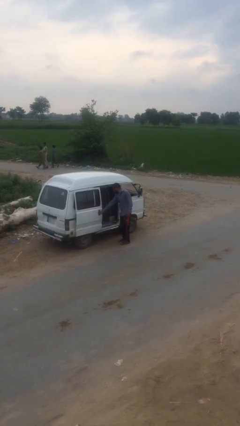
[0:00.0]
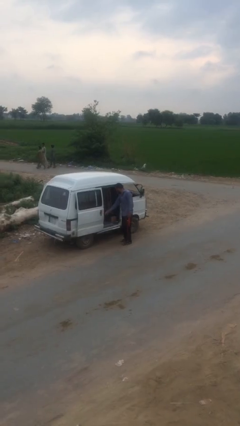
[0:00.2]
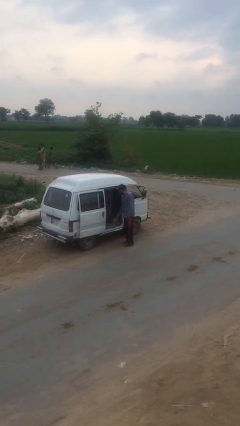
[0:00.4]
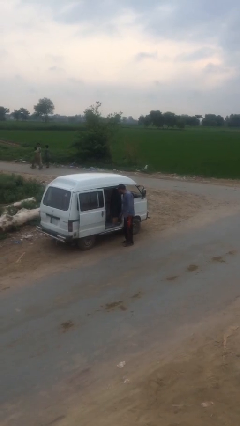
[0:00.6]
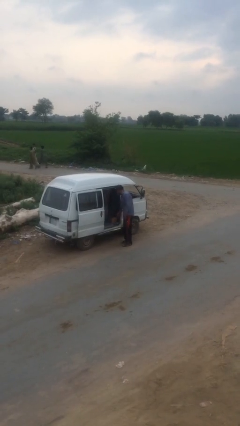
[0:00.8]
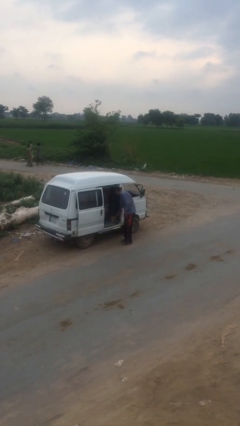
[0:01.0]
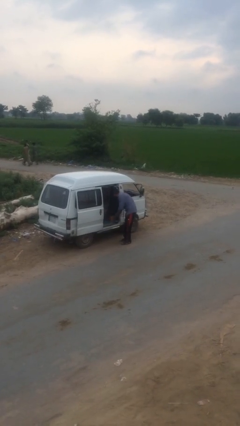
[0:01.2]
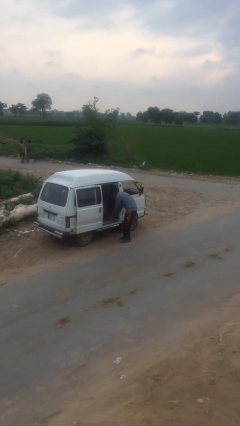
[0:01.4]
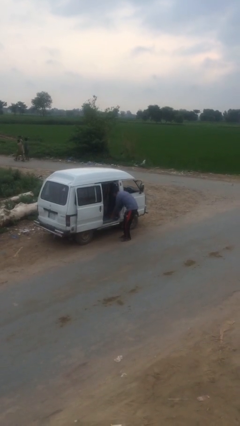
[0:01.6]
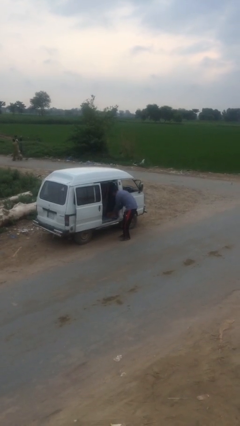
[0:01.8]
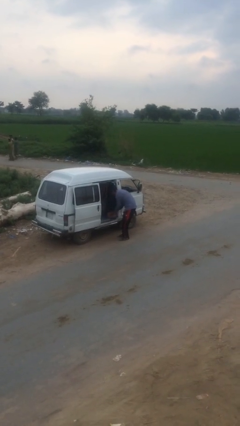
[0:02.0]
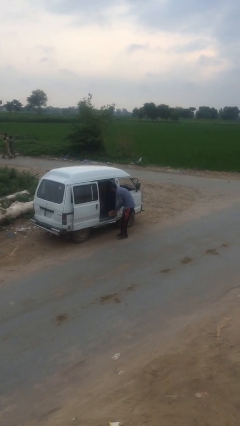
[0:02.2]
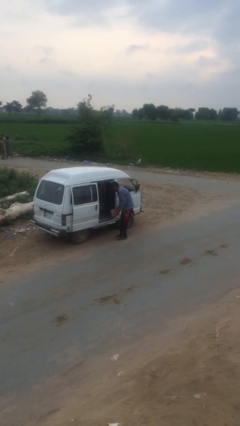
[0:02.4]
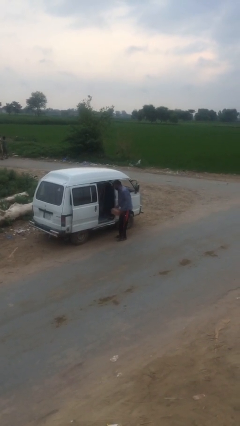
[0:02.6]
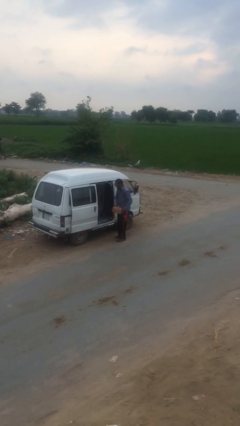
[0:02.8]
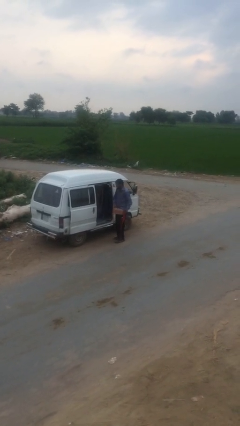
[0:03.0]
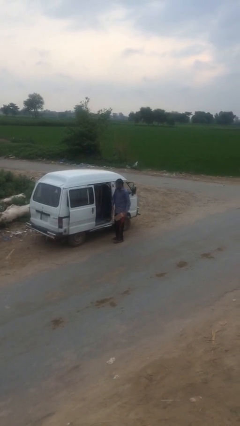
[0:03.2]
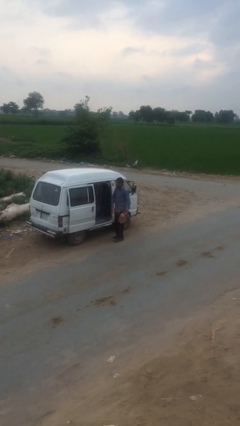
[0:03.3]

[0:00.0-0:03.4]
person unloads car

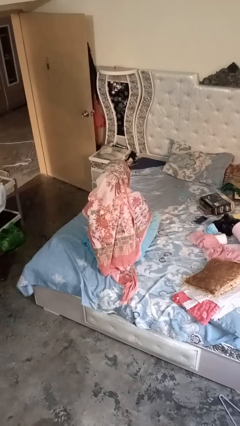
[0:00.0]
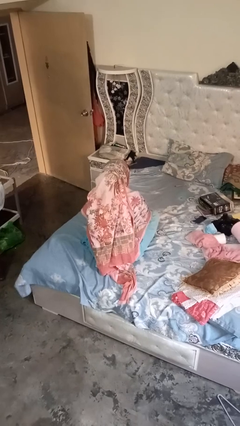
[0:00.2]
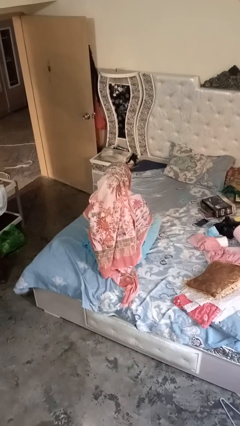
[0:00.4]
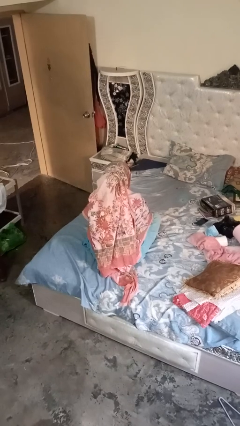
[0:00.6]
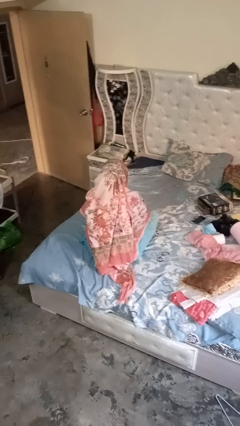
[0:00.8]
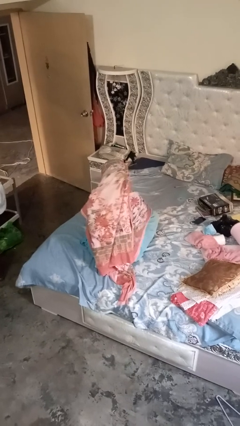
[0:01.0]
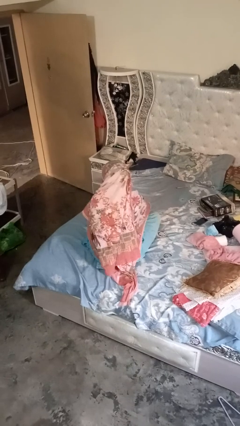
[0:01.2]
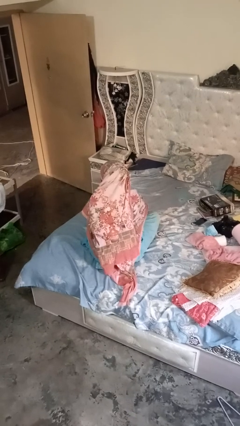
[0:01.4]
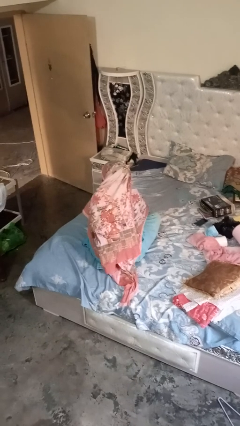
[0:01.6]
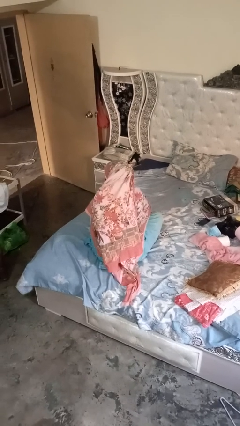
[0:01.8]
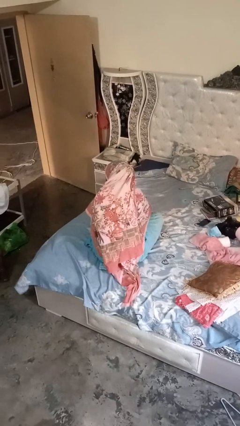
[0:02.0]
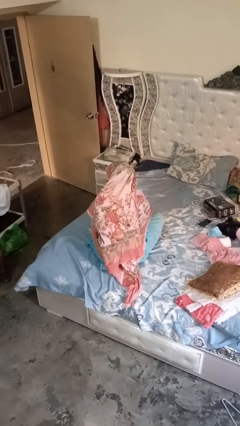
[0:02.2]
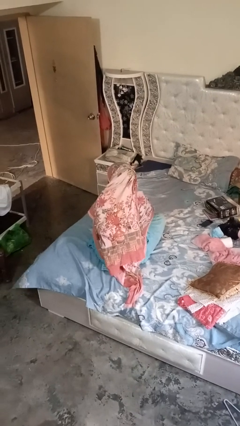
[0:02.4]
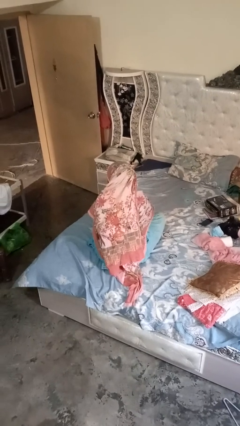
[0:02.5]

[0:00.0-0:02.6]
person gestures listen closely

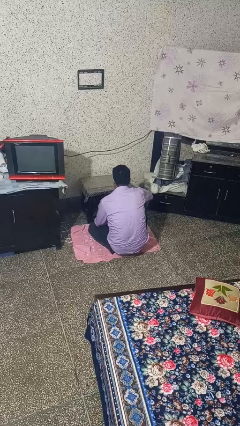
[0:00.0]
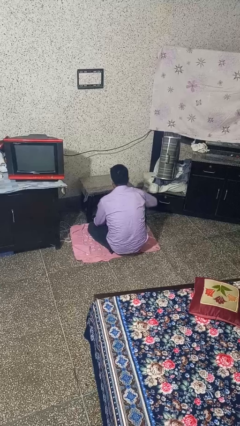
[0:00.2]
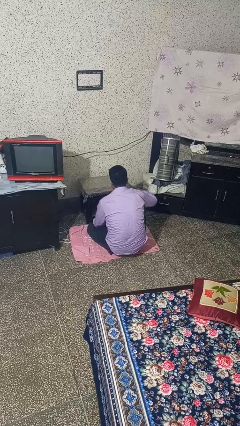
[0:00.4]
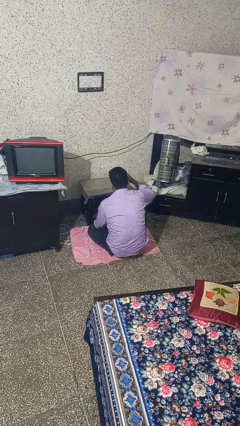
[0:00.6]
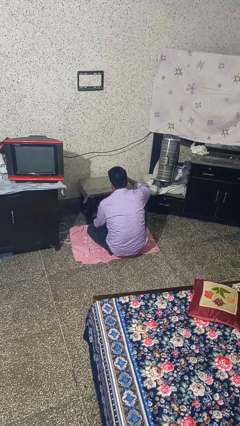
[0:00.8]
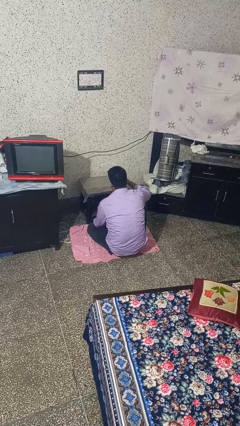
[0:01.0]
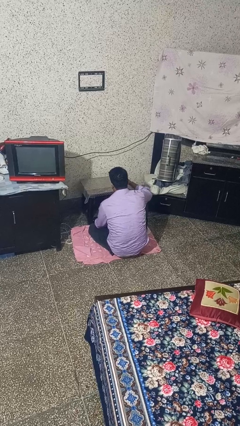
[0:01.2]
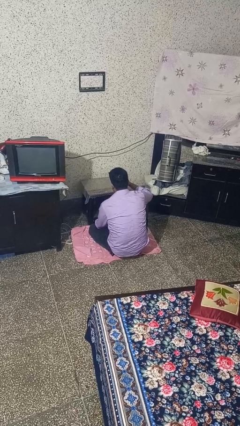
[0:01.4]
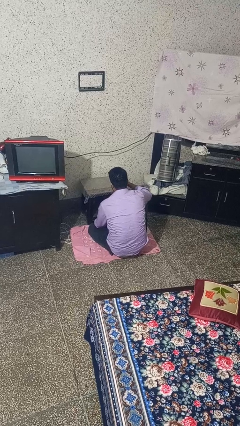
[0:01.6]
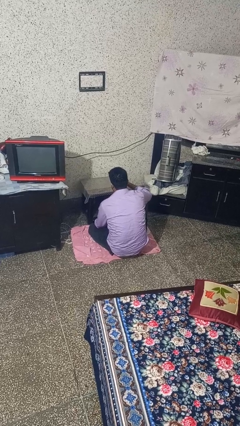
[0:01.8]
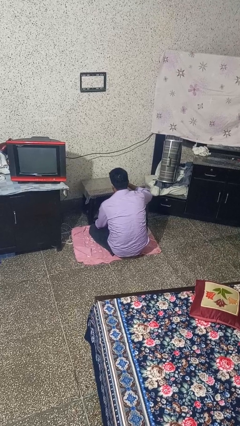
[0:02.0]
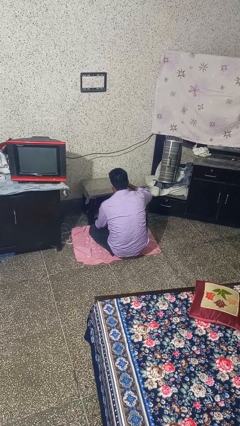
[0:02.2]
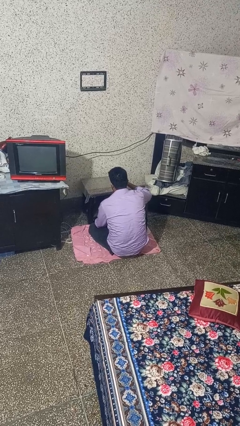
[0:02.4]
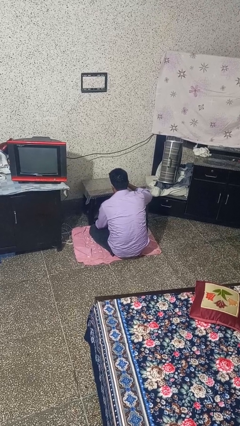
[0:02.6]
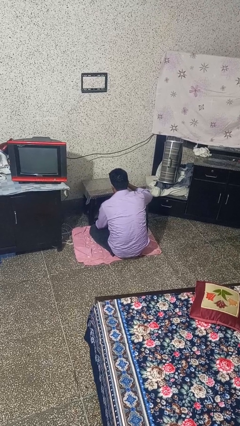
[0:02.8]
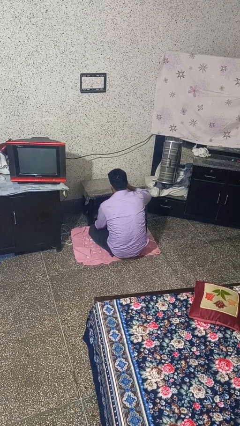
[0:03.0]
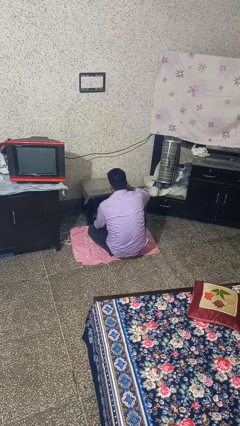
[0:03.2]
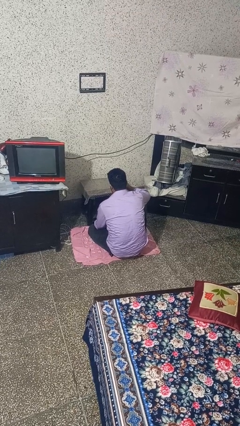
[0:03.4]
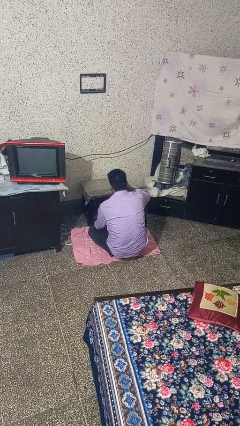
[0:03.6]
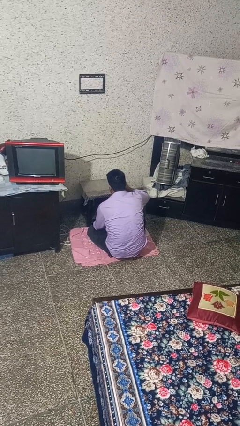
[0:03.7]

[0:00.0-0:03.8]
person sprays from bottle

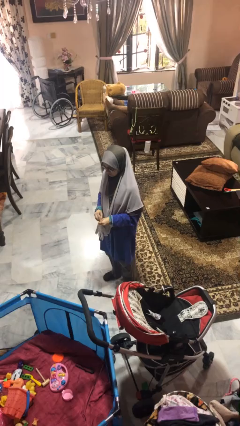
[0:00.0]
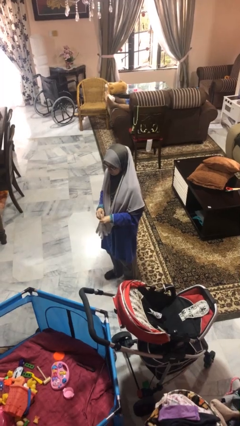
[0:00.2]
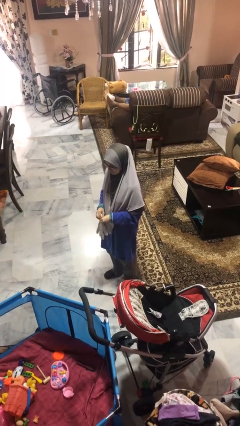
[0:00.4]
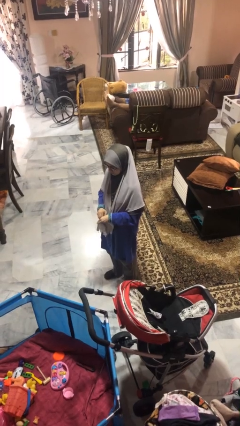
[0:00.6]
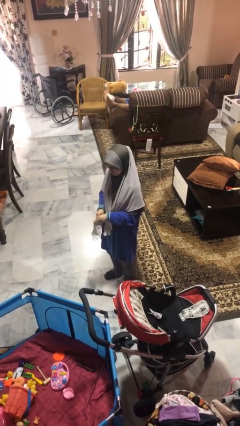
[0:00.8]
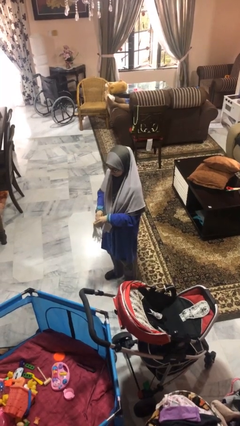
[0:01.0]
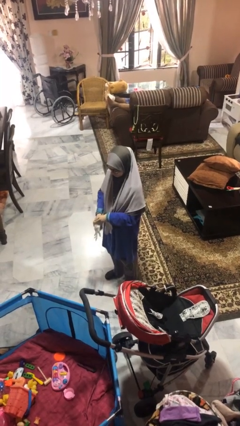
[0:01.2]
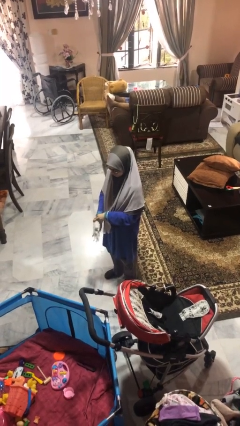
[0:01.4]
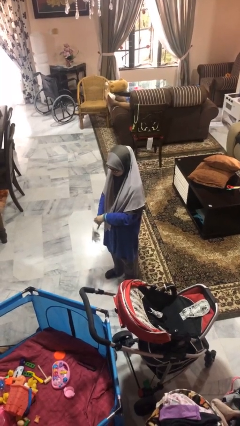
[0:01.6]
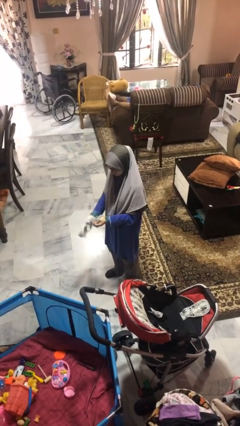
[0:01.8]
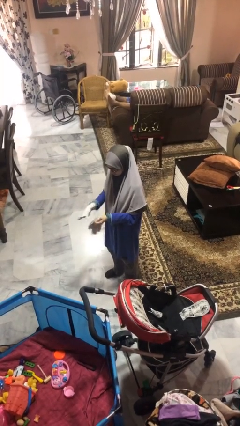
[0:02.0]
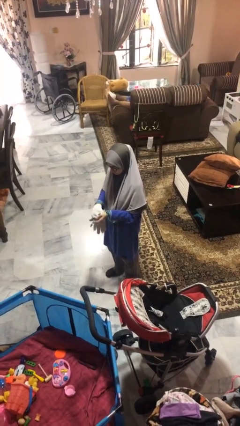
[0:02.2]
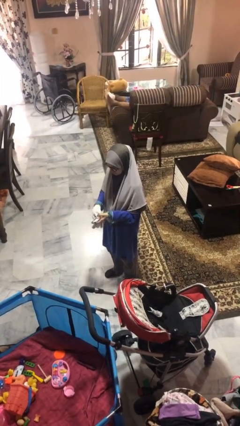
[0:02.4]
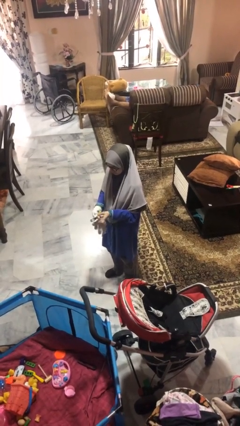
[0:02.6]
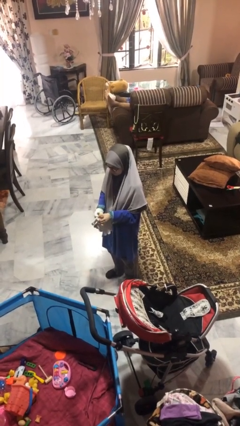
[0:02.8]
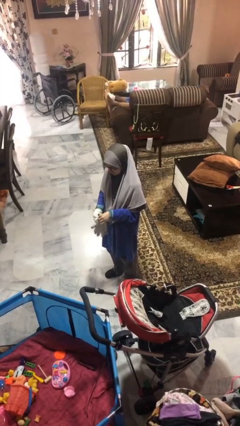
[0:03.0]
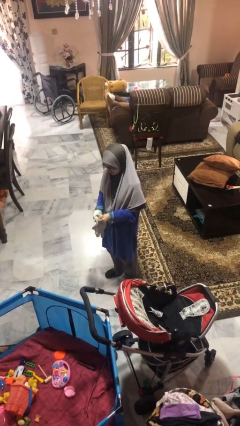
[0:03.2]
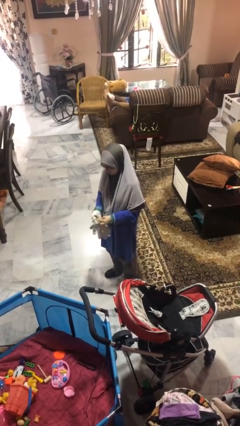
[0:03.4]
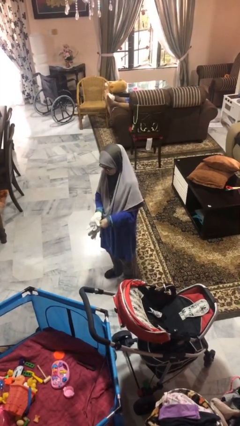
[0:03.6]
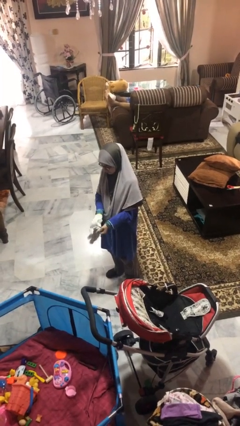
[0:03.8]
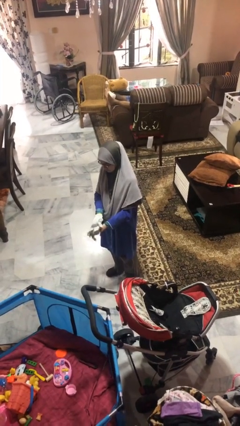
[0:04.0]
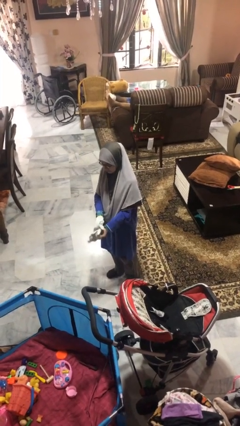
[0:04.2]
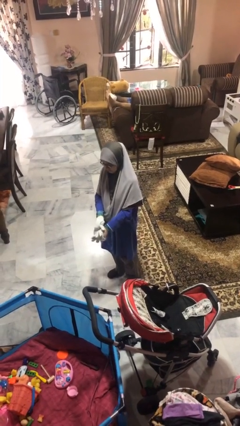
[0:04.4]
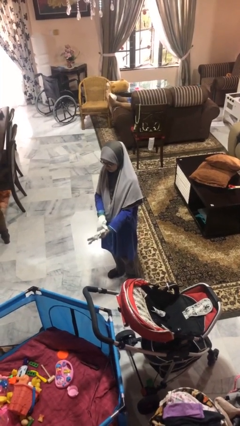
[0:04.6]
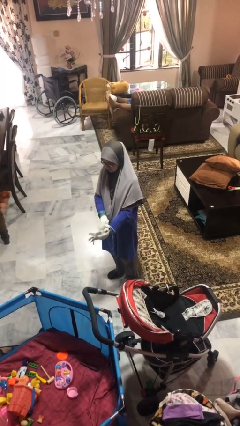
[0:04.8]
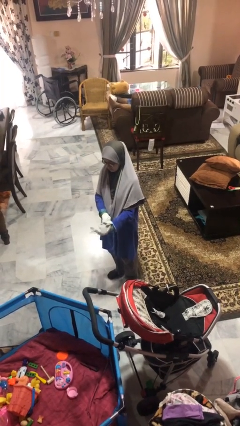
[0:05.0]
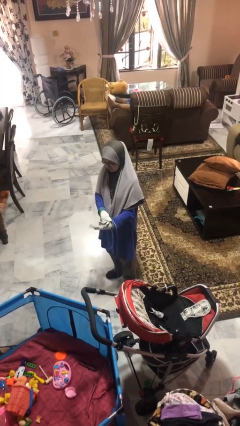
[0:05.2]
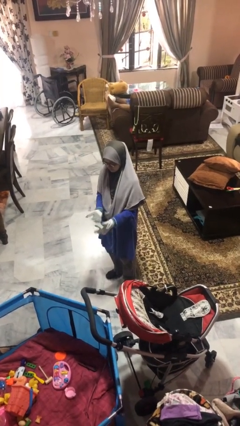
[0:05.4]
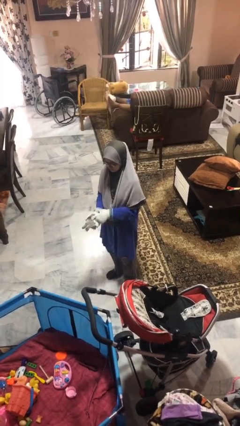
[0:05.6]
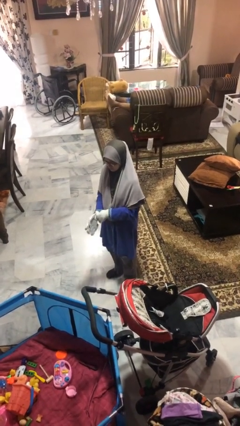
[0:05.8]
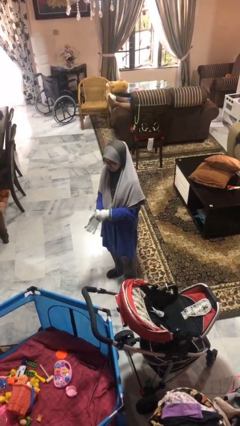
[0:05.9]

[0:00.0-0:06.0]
person puts on gloves

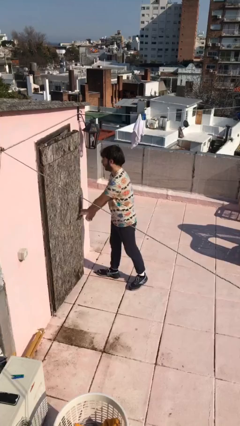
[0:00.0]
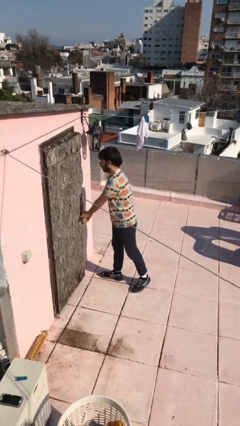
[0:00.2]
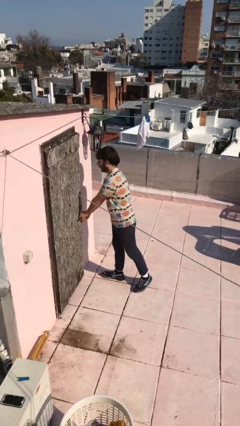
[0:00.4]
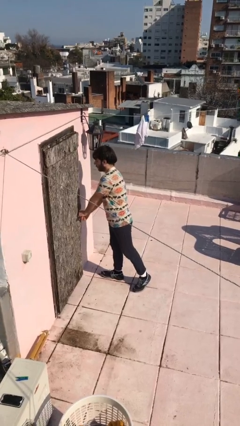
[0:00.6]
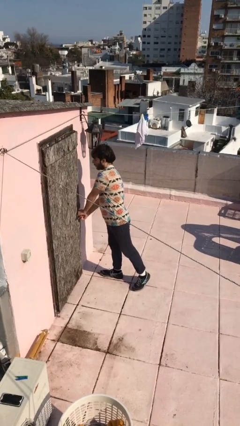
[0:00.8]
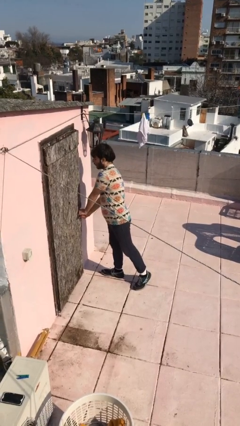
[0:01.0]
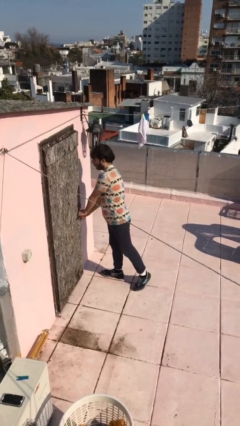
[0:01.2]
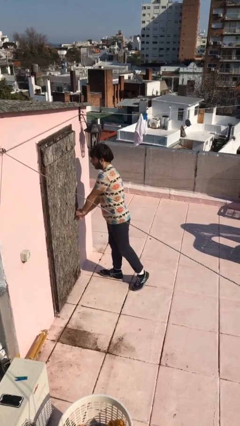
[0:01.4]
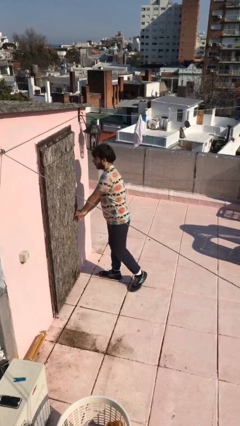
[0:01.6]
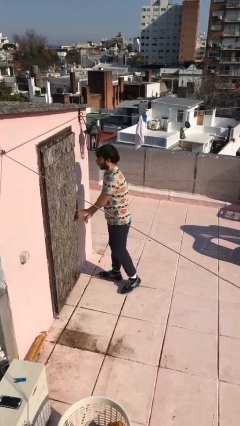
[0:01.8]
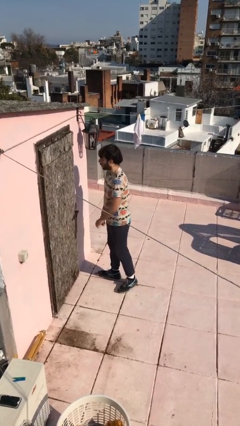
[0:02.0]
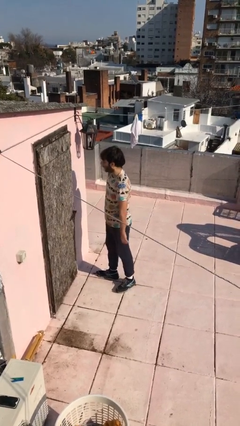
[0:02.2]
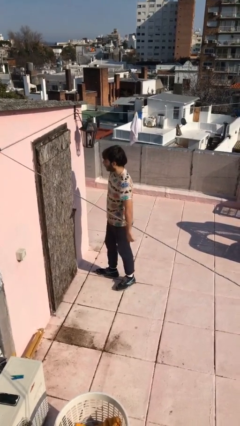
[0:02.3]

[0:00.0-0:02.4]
person locks door with keys
